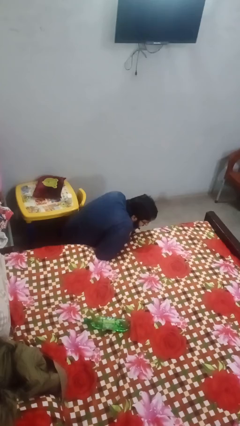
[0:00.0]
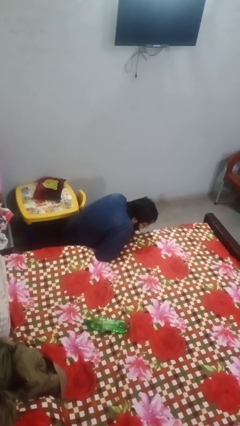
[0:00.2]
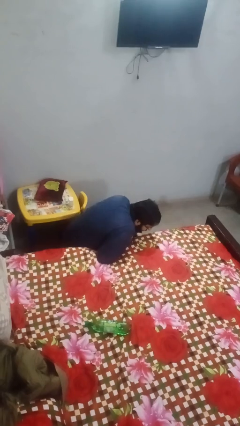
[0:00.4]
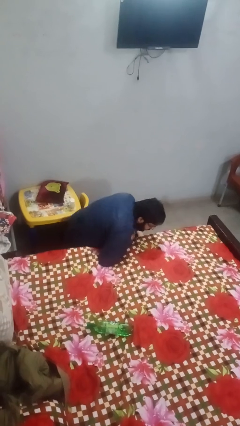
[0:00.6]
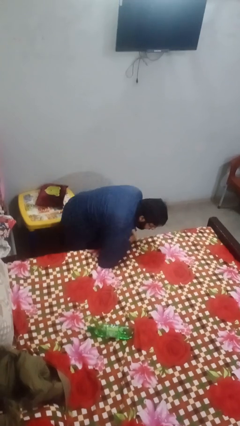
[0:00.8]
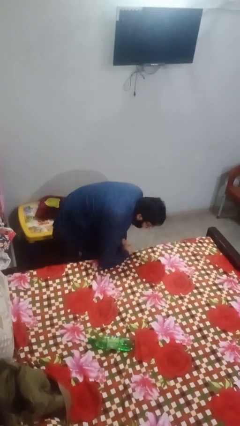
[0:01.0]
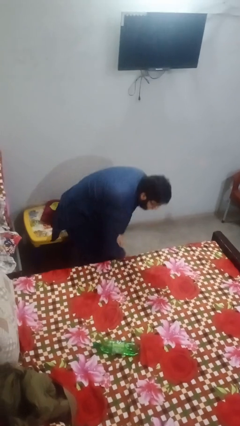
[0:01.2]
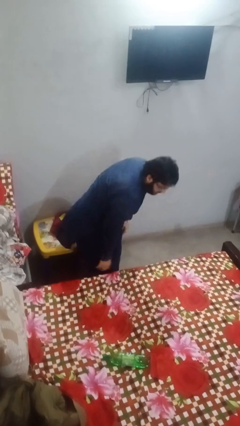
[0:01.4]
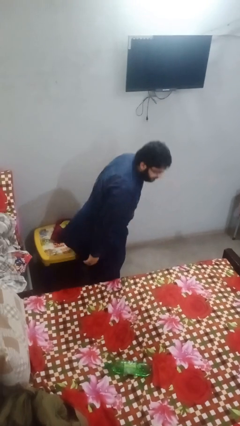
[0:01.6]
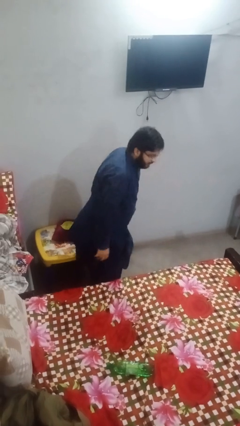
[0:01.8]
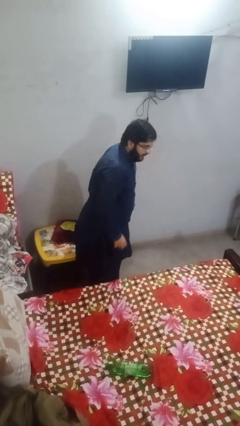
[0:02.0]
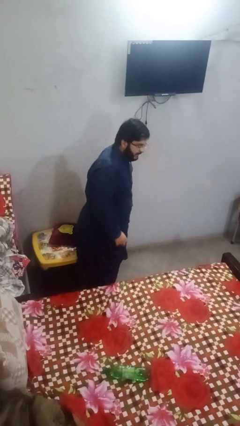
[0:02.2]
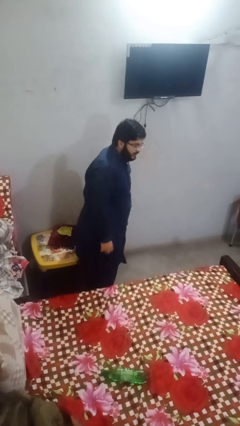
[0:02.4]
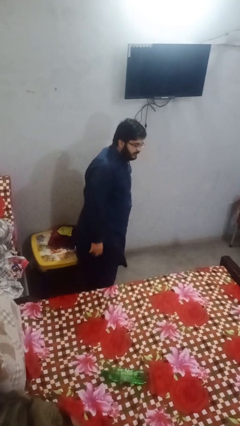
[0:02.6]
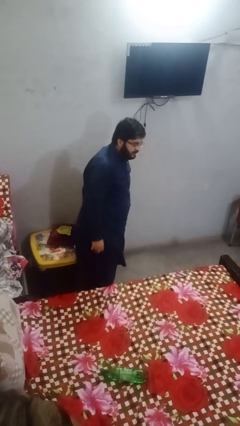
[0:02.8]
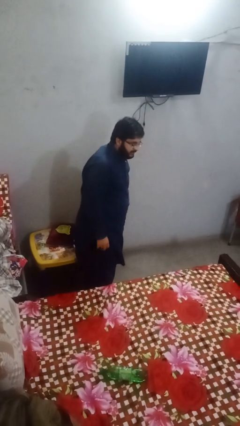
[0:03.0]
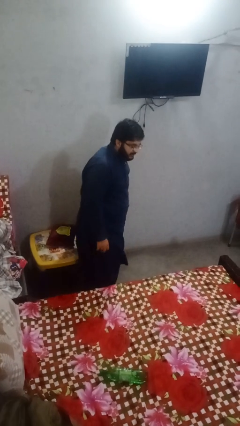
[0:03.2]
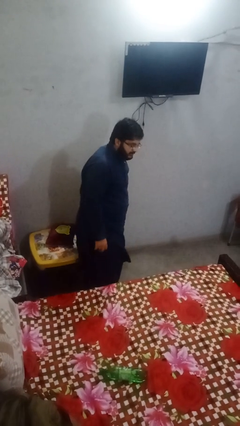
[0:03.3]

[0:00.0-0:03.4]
person stands up from floor

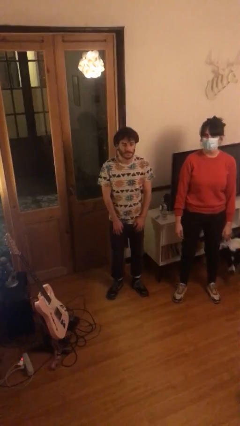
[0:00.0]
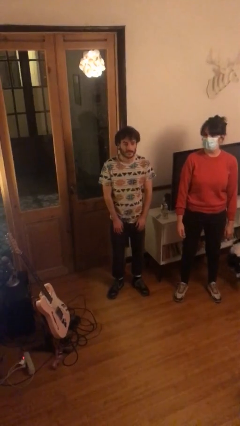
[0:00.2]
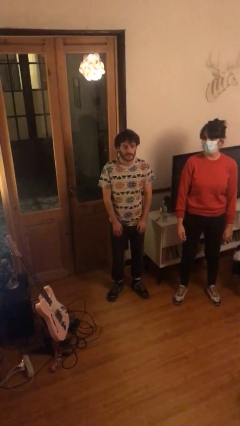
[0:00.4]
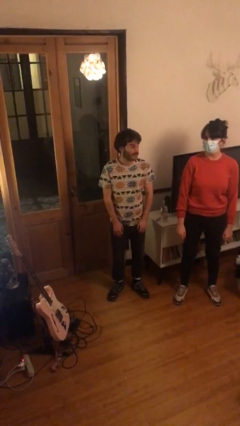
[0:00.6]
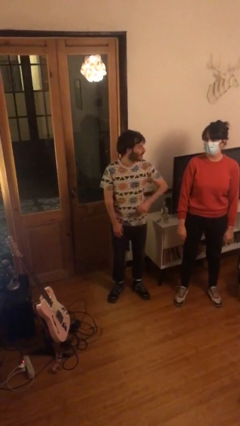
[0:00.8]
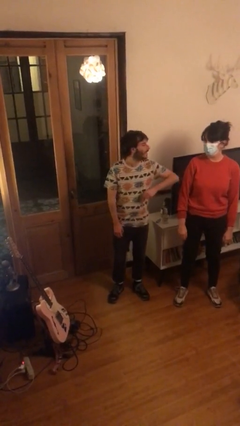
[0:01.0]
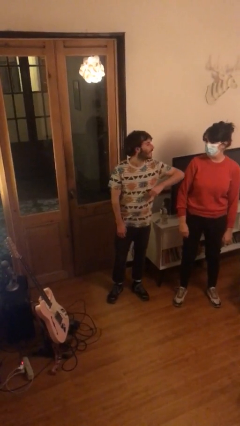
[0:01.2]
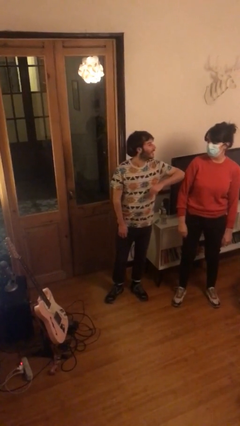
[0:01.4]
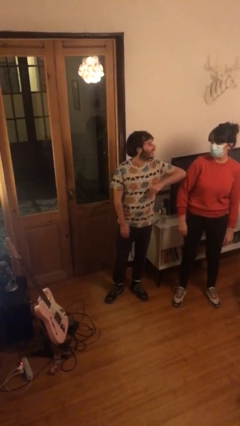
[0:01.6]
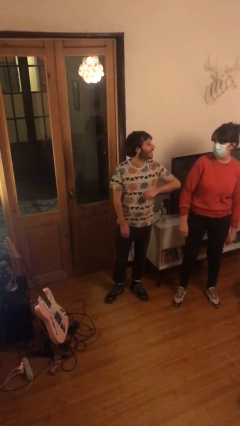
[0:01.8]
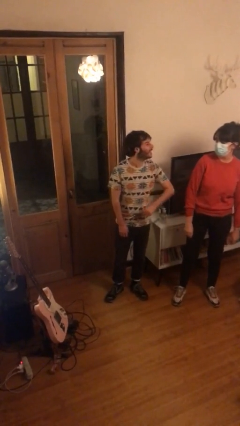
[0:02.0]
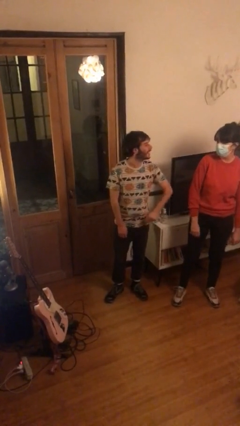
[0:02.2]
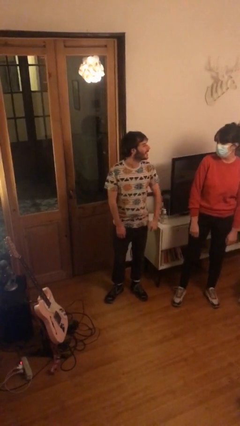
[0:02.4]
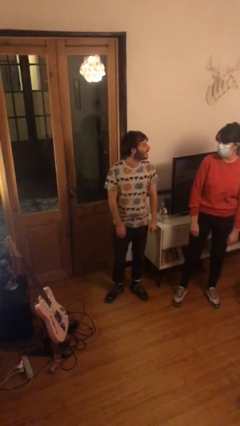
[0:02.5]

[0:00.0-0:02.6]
person nudges person with elbow

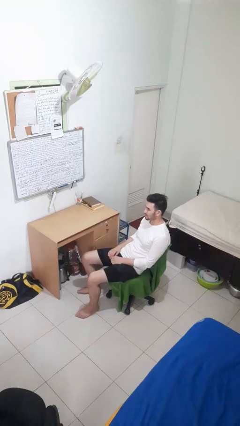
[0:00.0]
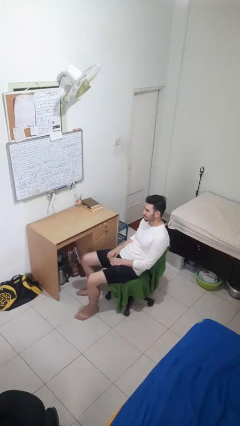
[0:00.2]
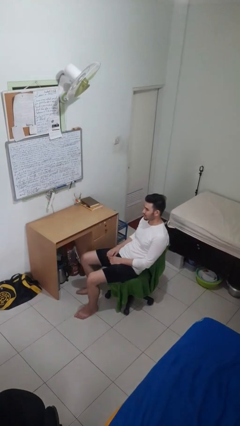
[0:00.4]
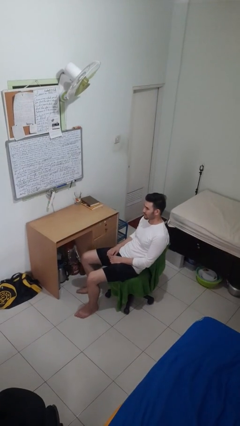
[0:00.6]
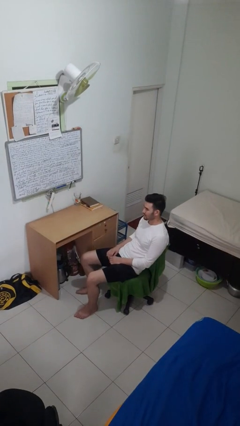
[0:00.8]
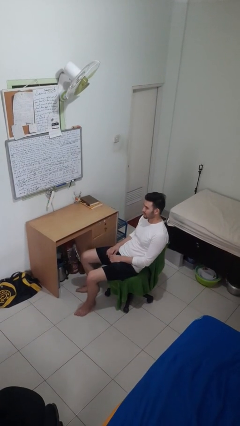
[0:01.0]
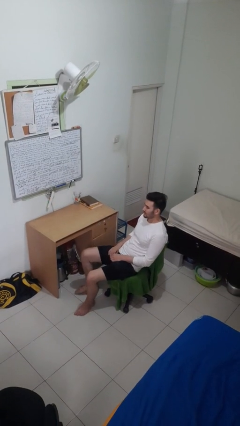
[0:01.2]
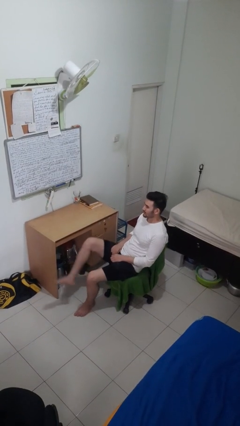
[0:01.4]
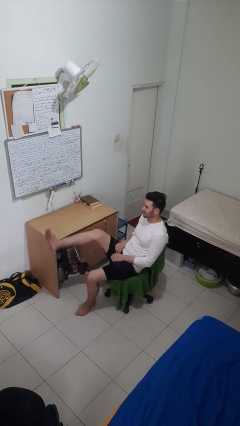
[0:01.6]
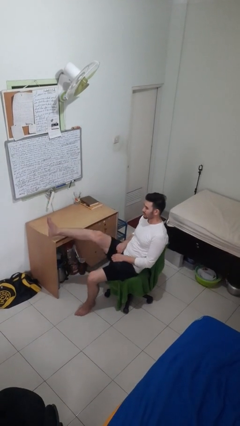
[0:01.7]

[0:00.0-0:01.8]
person puts feet up

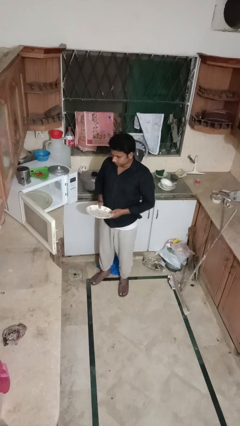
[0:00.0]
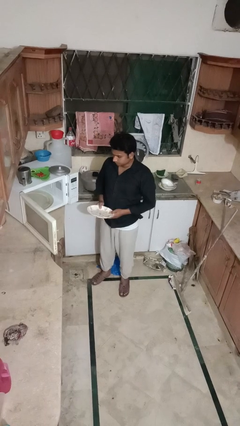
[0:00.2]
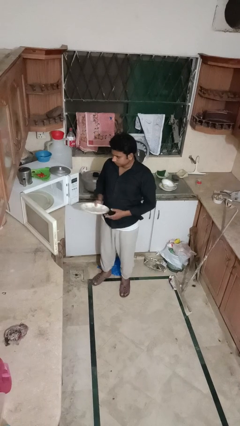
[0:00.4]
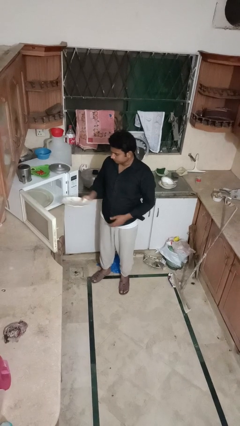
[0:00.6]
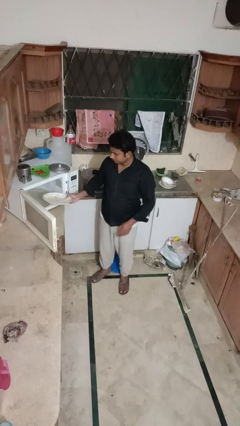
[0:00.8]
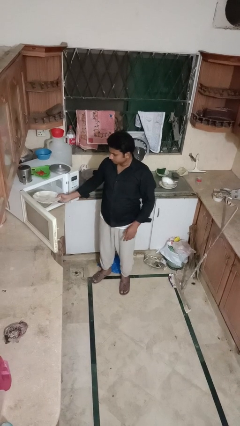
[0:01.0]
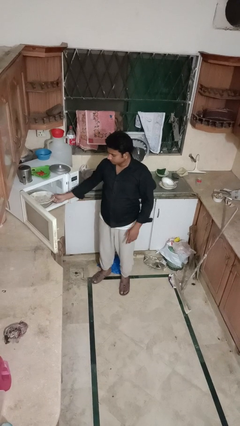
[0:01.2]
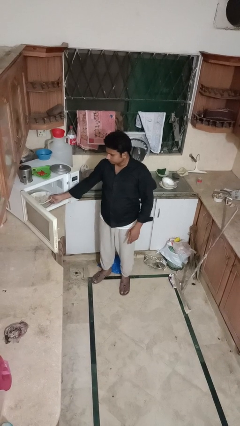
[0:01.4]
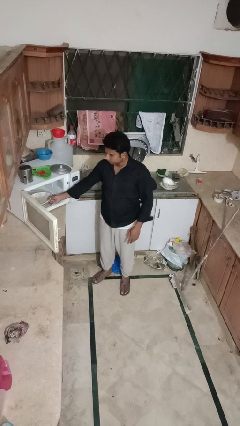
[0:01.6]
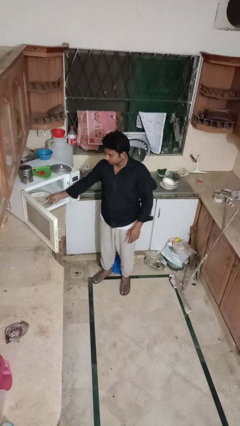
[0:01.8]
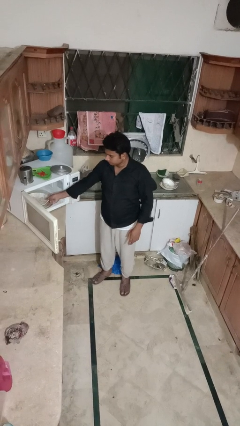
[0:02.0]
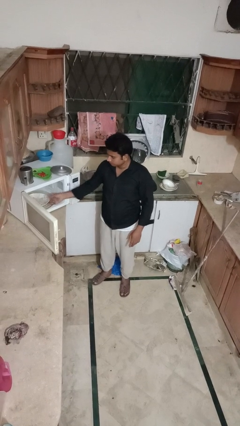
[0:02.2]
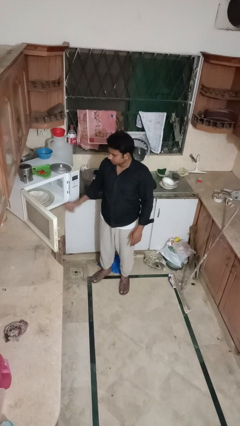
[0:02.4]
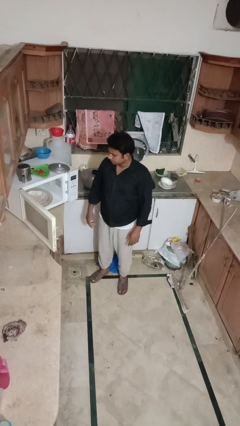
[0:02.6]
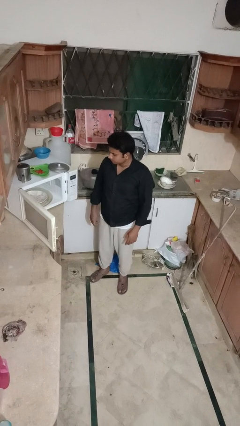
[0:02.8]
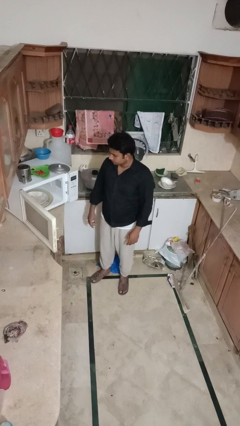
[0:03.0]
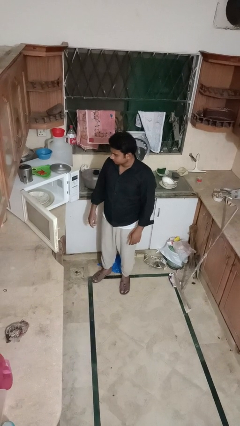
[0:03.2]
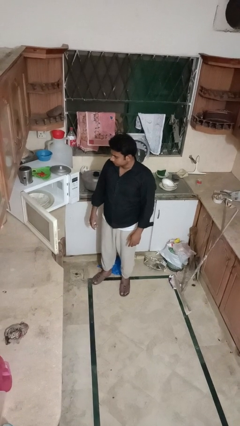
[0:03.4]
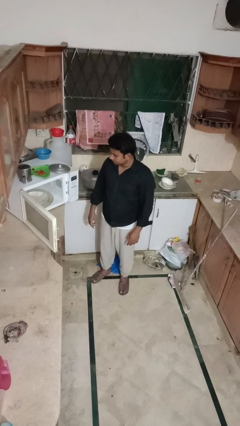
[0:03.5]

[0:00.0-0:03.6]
person puts object into microwave

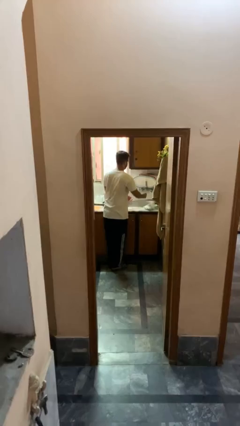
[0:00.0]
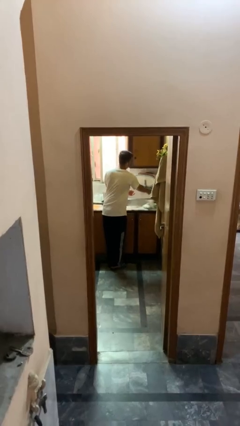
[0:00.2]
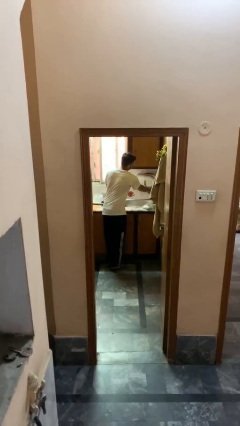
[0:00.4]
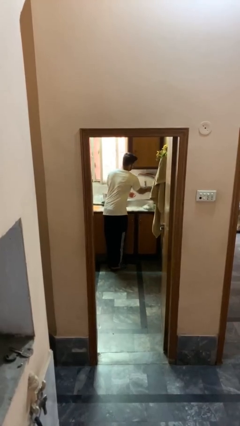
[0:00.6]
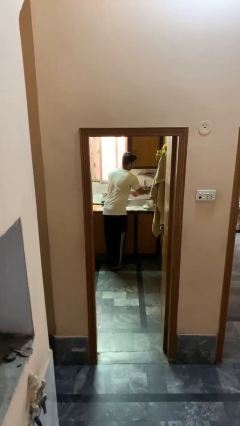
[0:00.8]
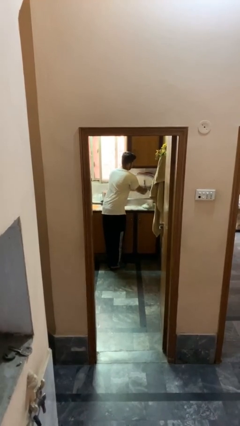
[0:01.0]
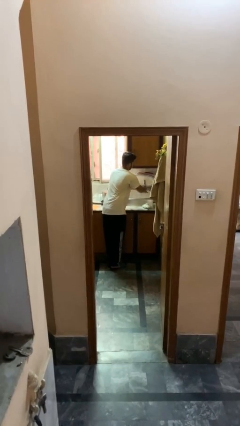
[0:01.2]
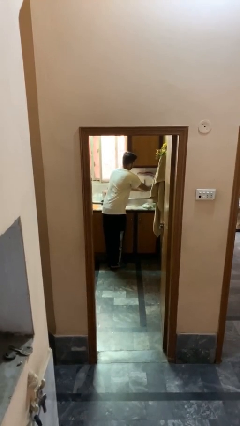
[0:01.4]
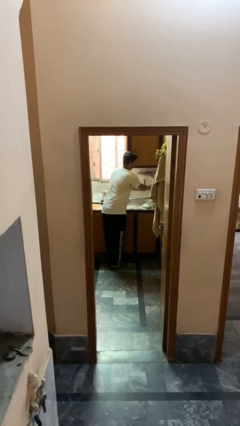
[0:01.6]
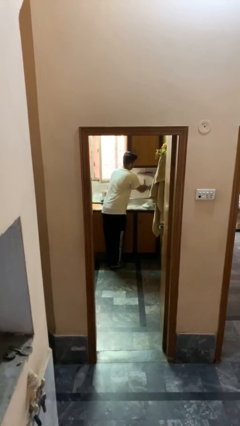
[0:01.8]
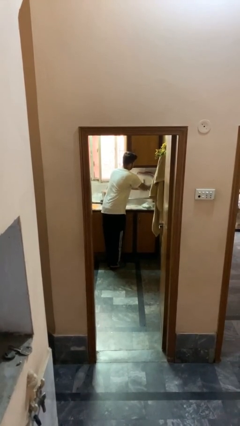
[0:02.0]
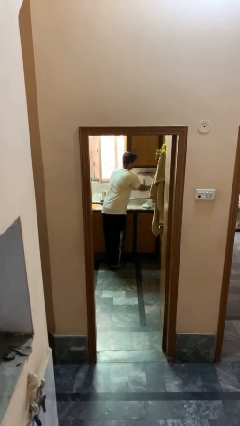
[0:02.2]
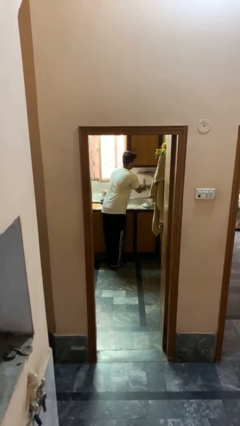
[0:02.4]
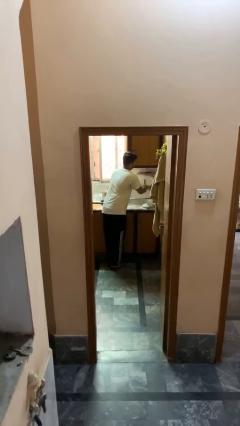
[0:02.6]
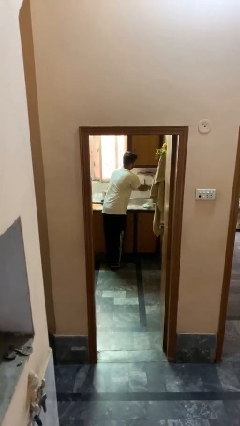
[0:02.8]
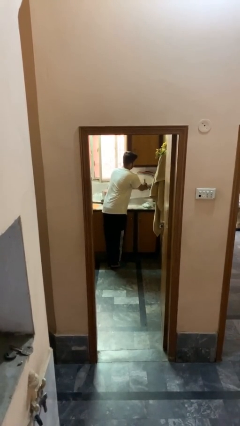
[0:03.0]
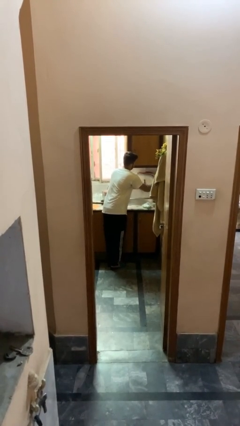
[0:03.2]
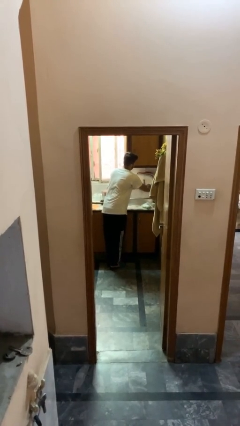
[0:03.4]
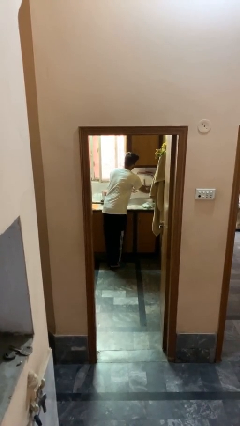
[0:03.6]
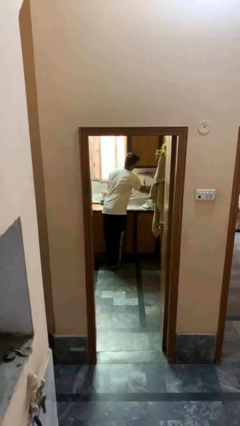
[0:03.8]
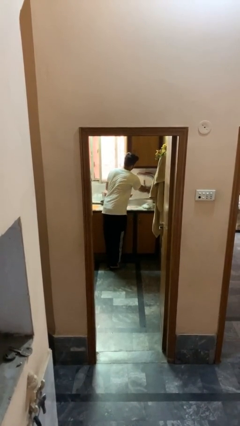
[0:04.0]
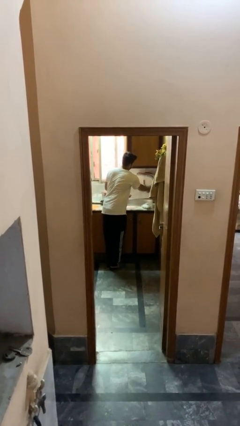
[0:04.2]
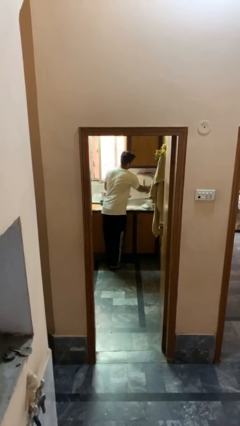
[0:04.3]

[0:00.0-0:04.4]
person washes hands

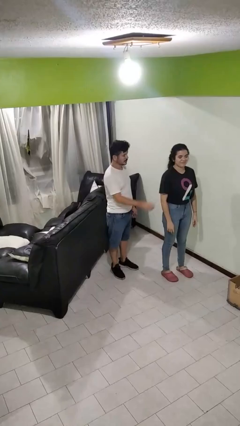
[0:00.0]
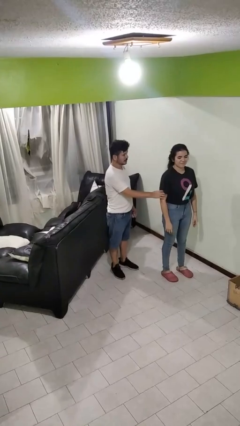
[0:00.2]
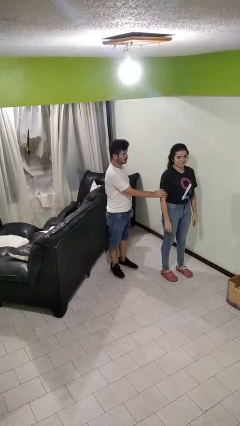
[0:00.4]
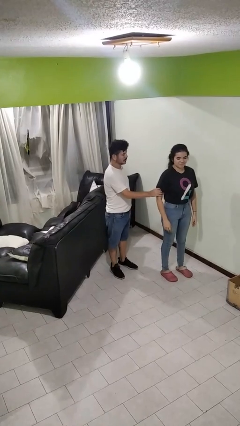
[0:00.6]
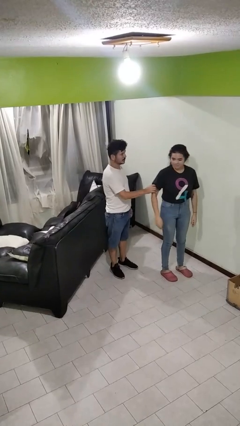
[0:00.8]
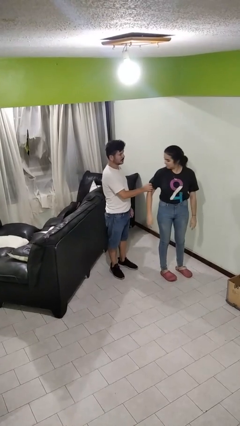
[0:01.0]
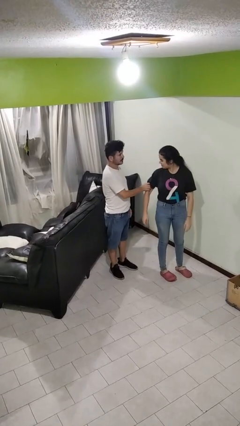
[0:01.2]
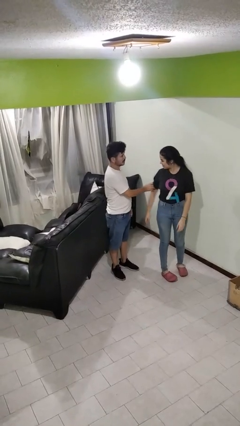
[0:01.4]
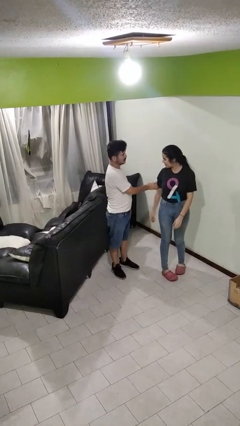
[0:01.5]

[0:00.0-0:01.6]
person grabs person by bicep

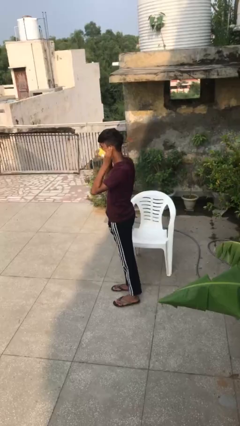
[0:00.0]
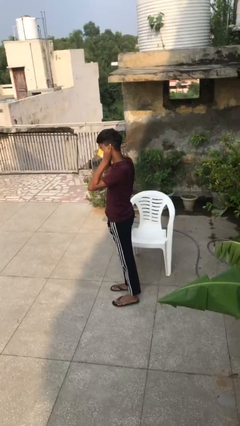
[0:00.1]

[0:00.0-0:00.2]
person puts on facemask
